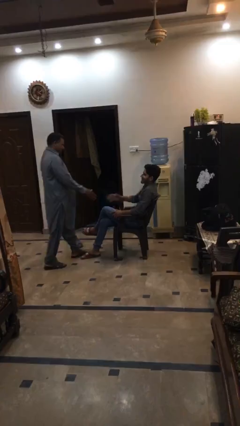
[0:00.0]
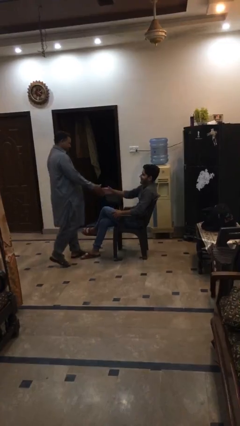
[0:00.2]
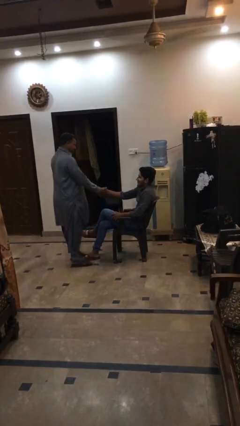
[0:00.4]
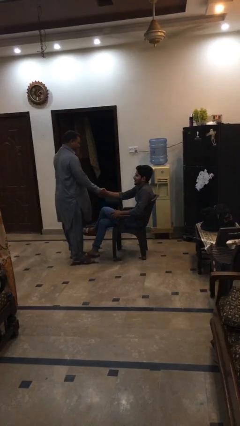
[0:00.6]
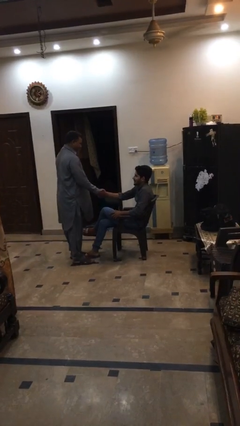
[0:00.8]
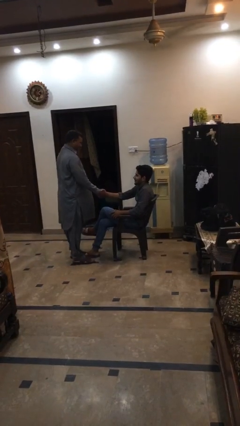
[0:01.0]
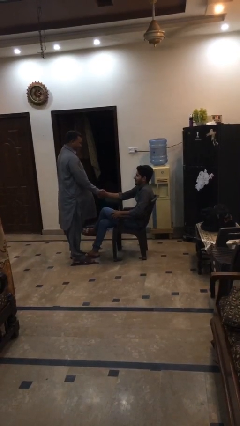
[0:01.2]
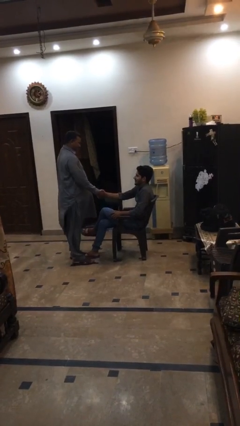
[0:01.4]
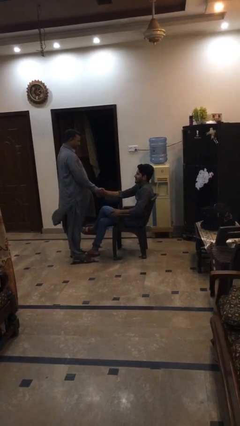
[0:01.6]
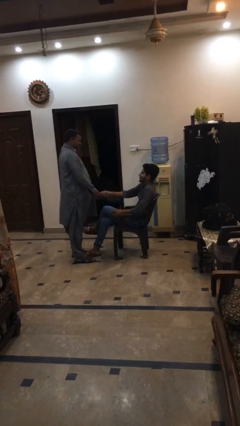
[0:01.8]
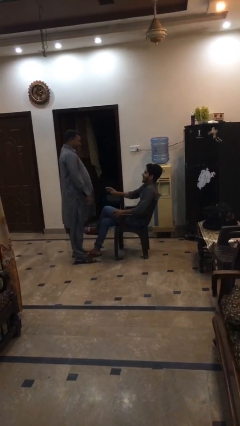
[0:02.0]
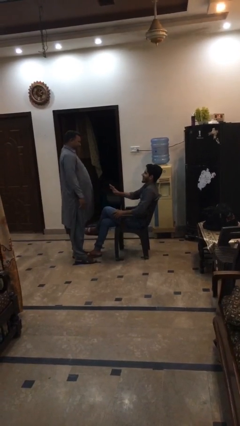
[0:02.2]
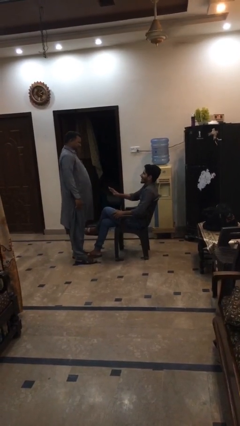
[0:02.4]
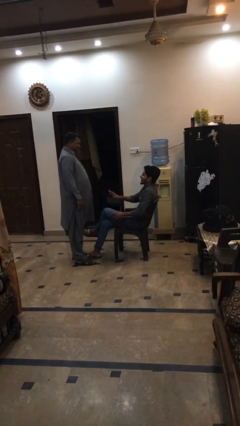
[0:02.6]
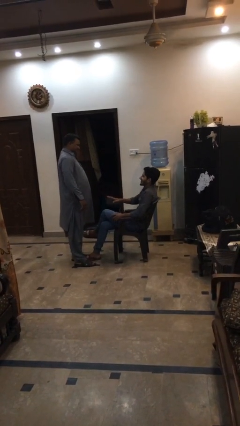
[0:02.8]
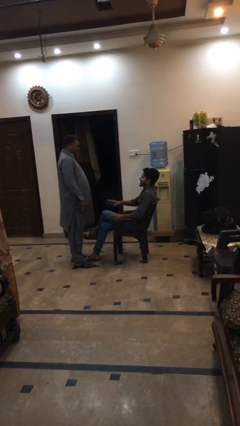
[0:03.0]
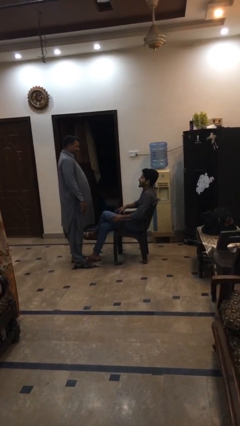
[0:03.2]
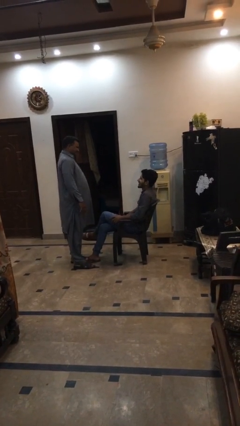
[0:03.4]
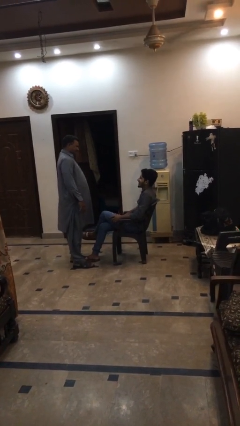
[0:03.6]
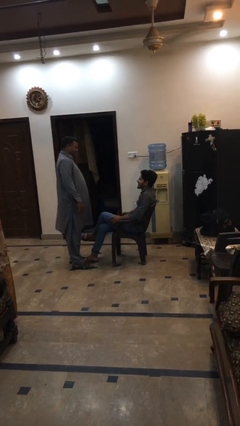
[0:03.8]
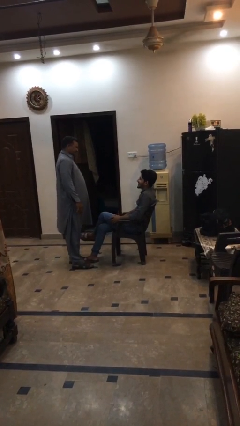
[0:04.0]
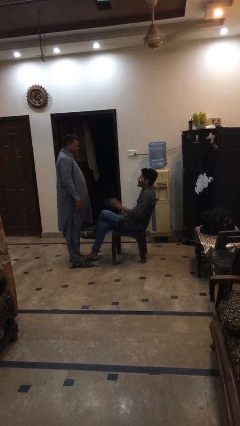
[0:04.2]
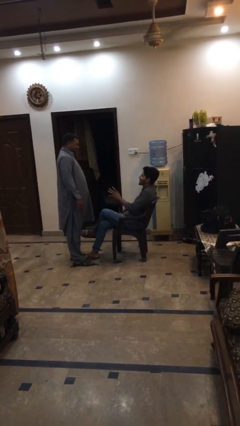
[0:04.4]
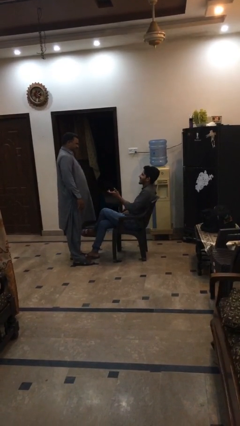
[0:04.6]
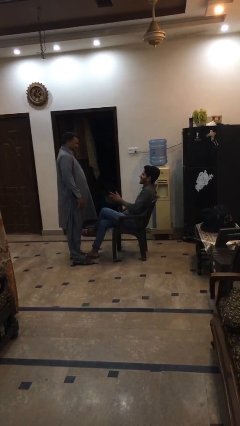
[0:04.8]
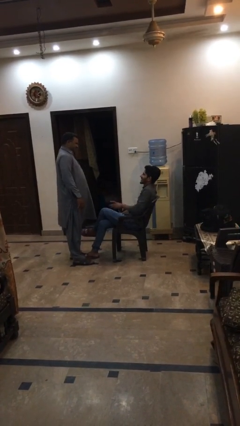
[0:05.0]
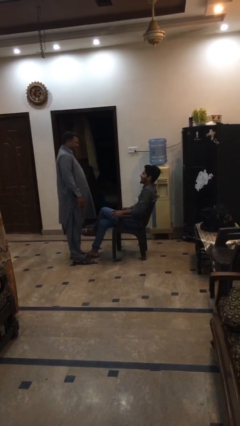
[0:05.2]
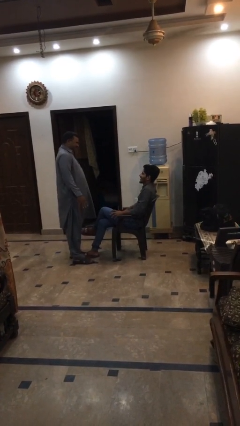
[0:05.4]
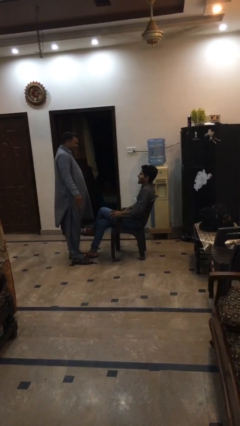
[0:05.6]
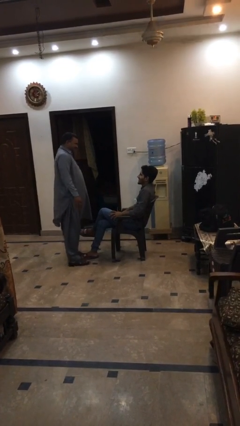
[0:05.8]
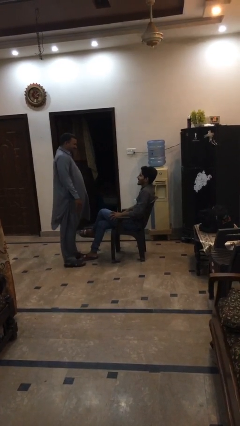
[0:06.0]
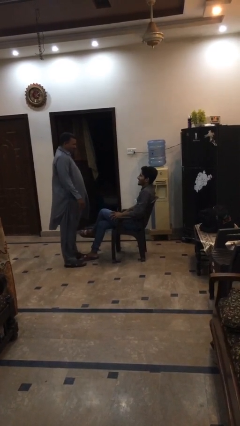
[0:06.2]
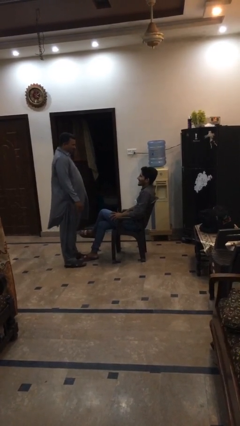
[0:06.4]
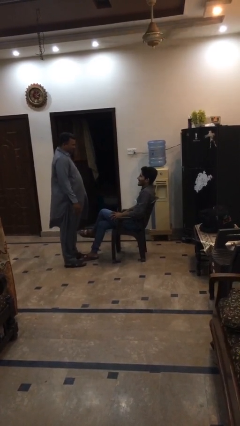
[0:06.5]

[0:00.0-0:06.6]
person shakes hand

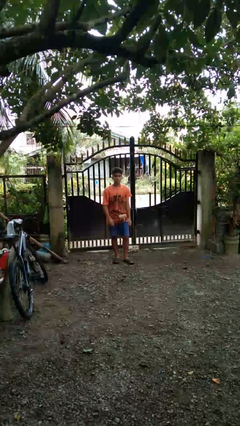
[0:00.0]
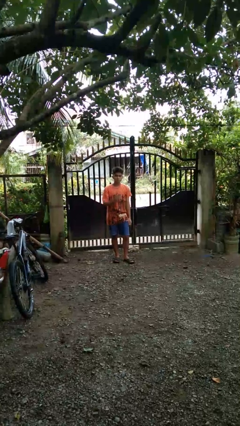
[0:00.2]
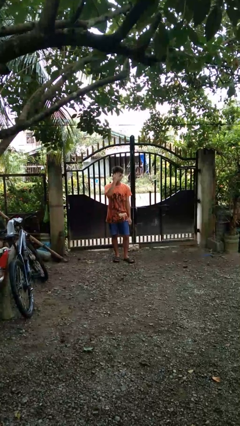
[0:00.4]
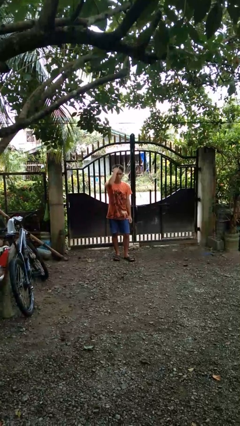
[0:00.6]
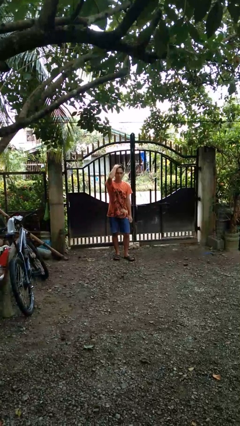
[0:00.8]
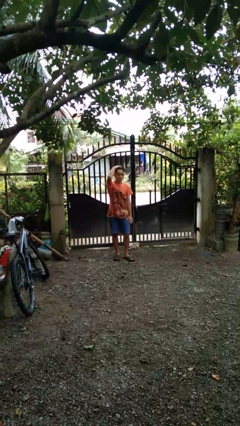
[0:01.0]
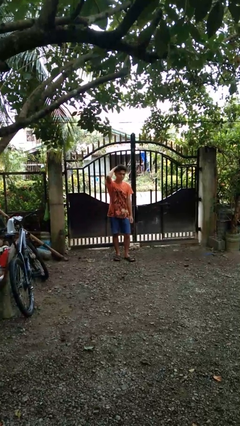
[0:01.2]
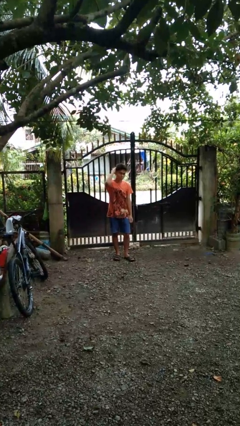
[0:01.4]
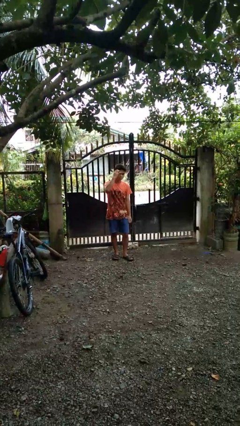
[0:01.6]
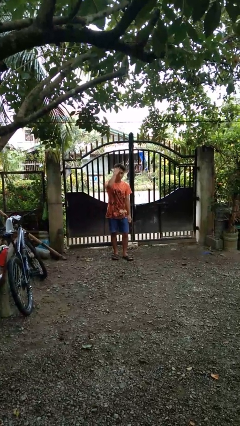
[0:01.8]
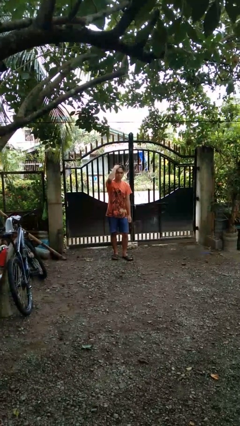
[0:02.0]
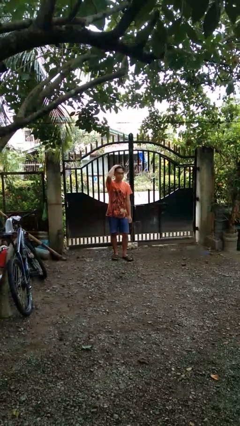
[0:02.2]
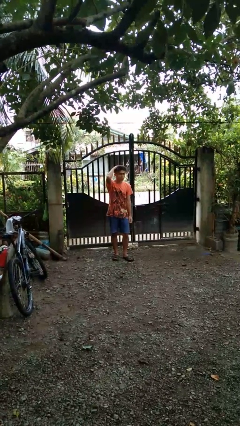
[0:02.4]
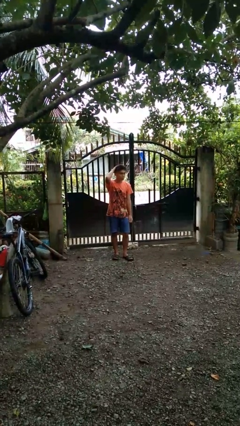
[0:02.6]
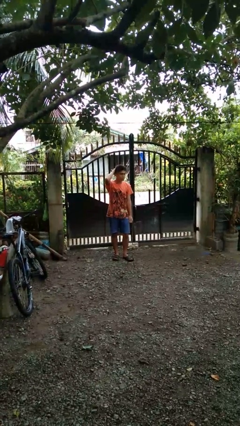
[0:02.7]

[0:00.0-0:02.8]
person strokes hair

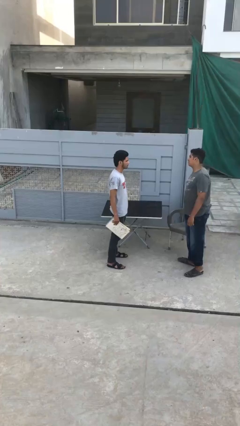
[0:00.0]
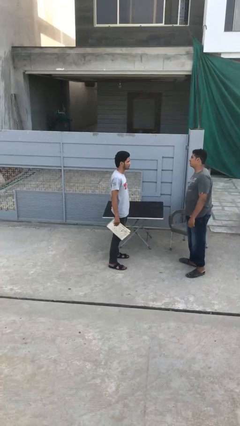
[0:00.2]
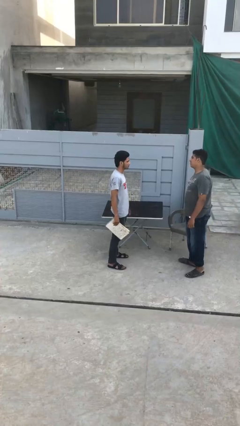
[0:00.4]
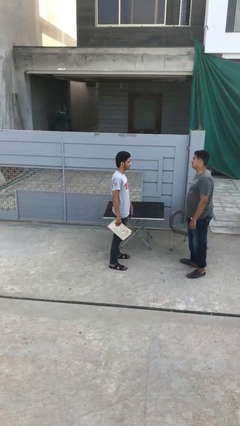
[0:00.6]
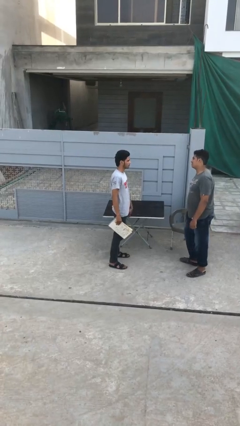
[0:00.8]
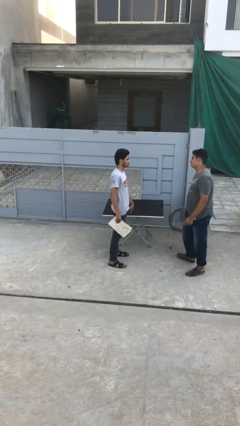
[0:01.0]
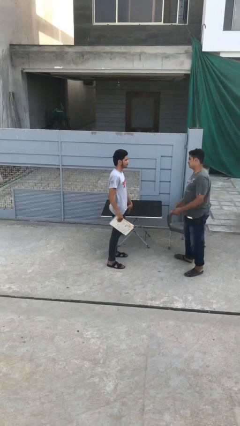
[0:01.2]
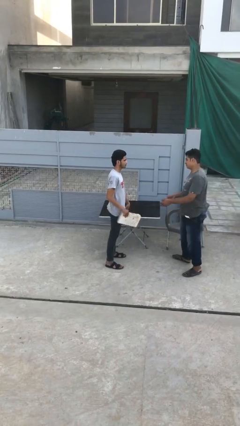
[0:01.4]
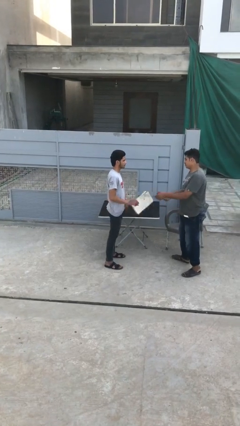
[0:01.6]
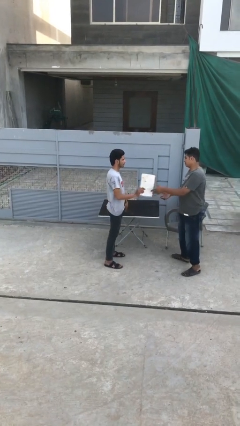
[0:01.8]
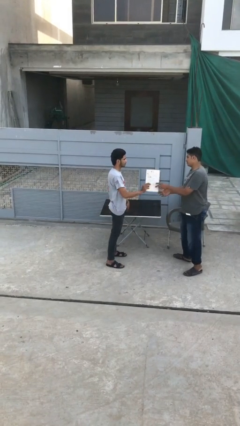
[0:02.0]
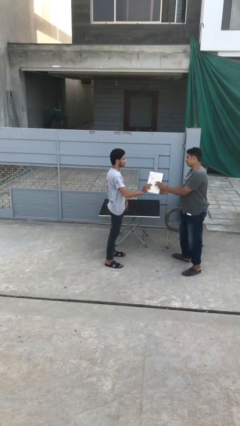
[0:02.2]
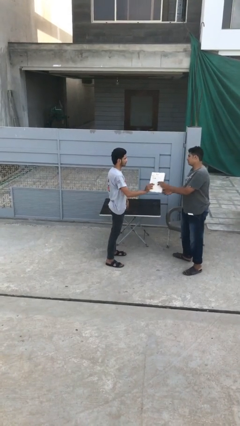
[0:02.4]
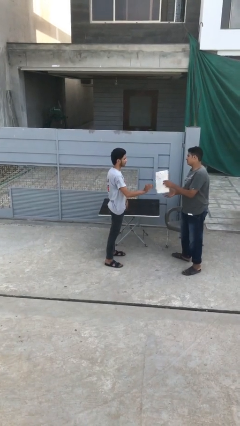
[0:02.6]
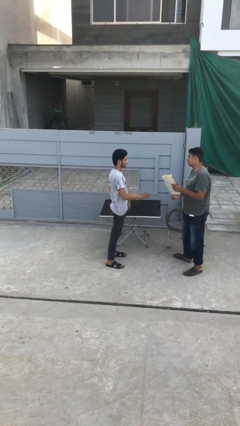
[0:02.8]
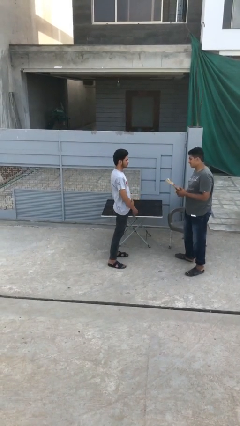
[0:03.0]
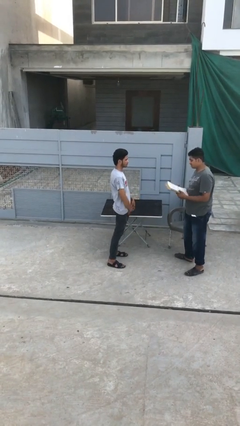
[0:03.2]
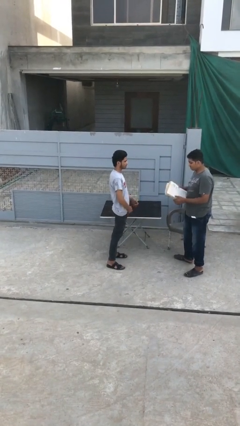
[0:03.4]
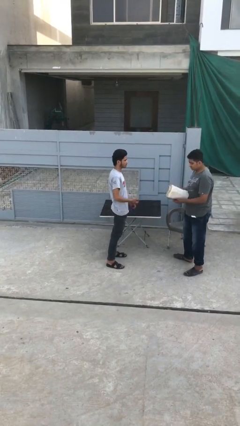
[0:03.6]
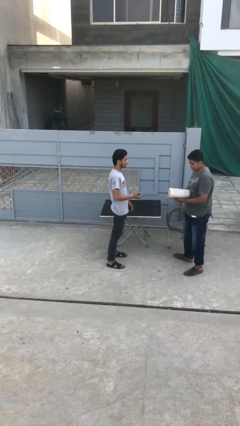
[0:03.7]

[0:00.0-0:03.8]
person transfers object to person

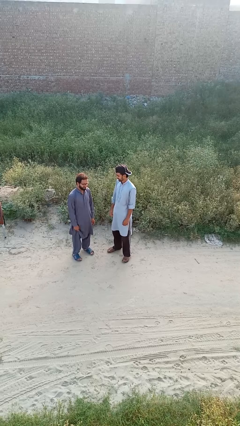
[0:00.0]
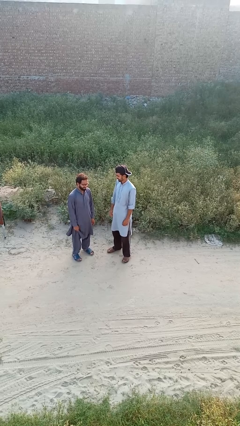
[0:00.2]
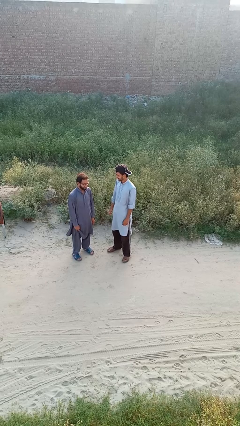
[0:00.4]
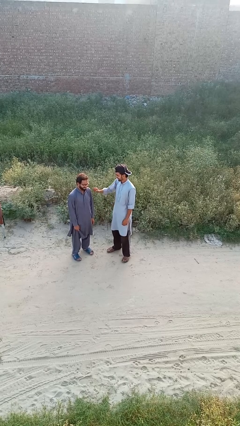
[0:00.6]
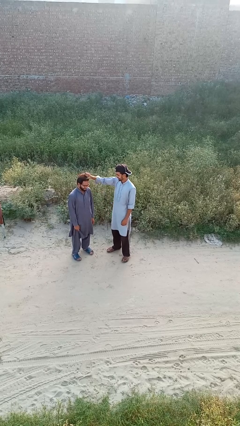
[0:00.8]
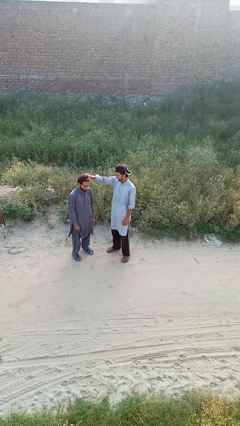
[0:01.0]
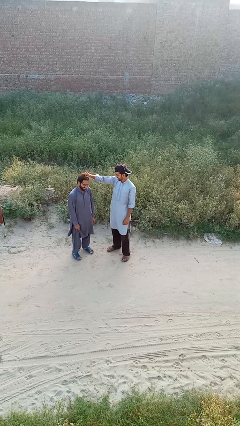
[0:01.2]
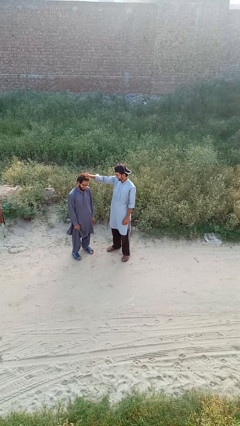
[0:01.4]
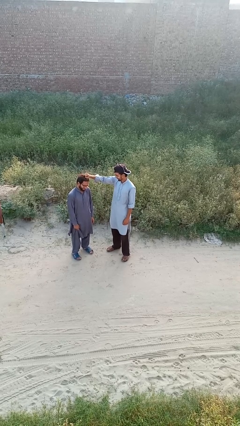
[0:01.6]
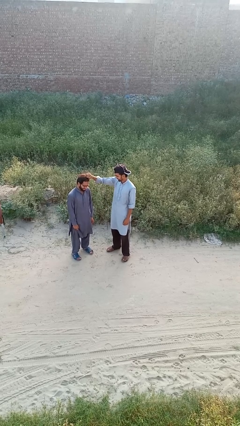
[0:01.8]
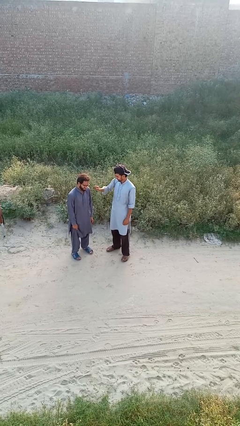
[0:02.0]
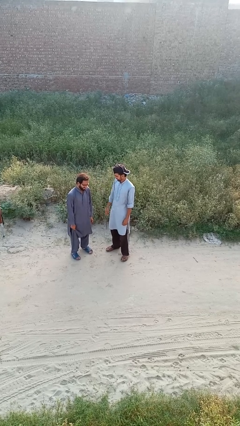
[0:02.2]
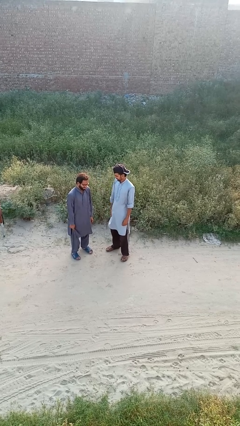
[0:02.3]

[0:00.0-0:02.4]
person grabs person by hair

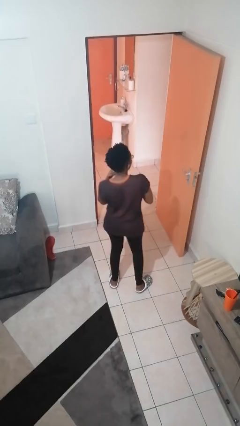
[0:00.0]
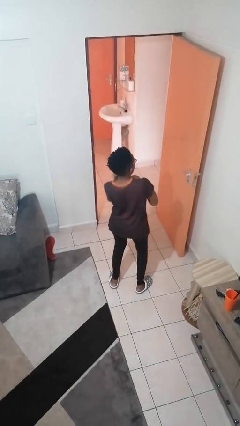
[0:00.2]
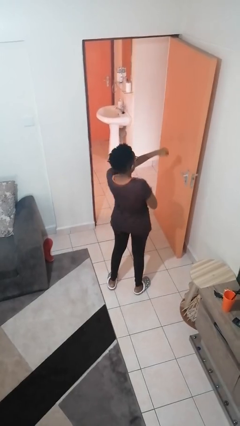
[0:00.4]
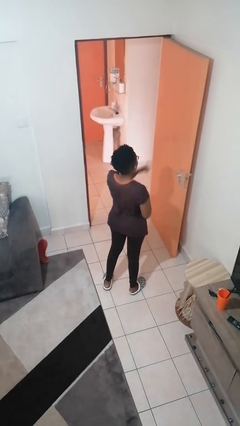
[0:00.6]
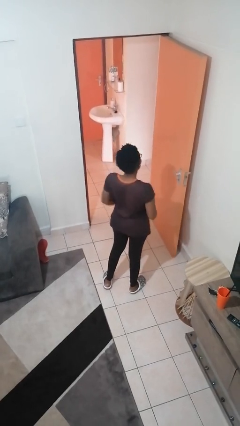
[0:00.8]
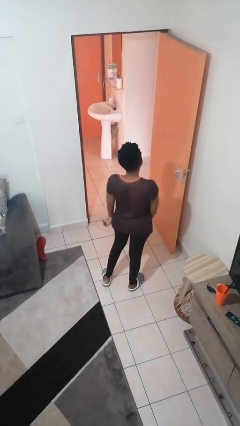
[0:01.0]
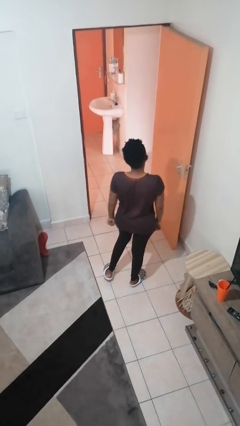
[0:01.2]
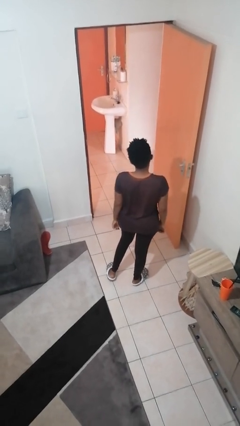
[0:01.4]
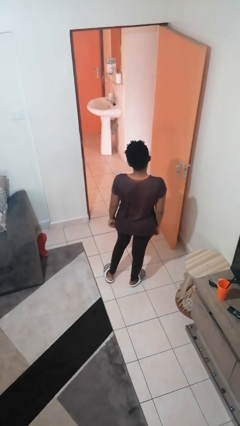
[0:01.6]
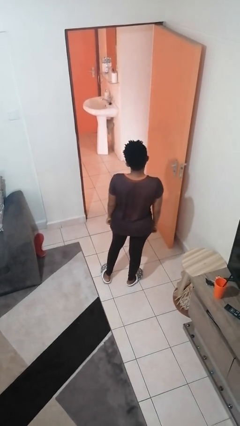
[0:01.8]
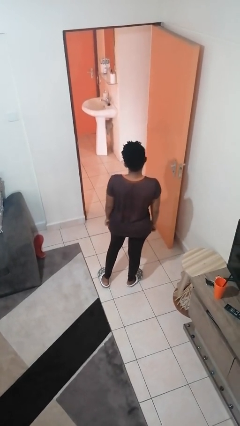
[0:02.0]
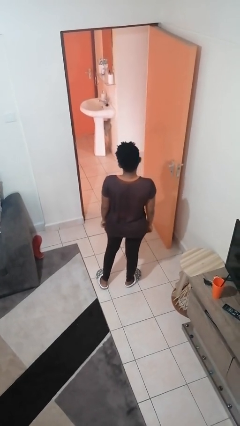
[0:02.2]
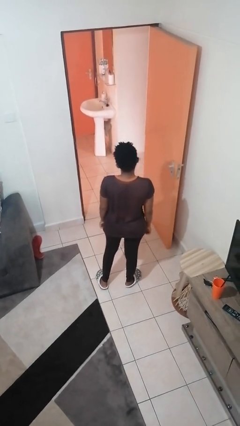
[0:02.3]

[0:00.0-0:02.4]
person punches
